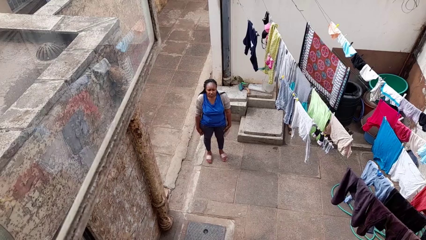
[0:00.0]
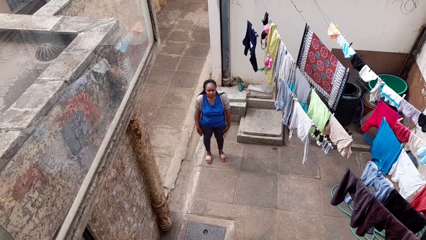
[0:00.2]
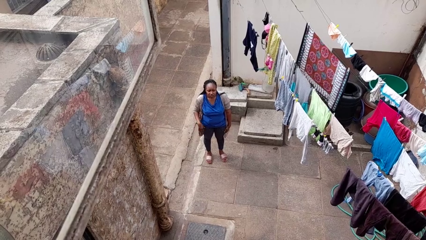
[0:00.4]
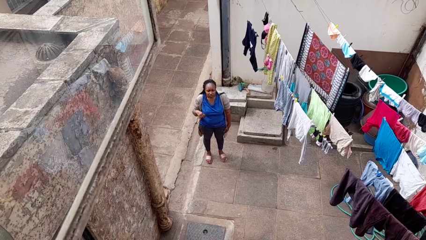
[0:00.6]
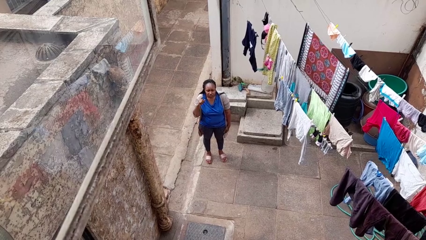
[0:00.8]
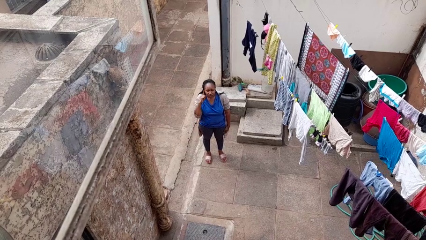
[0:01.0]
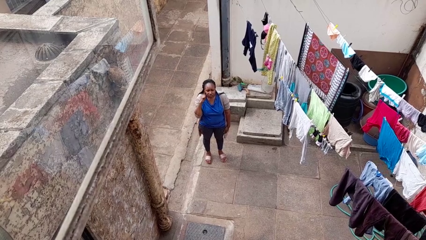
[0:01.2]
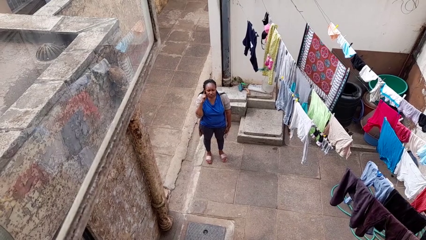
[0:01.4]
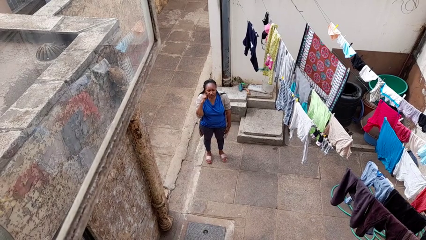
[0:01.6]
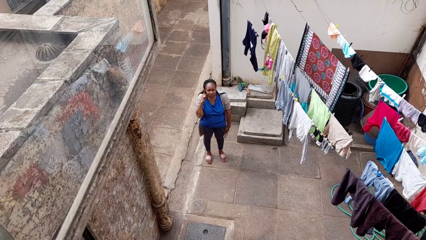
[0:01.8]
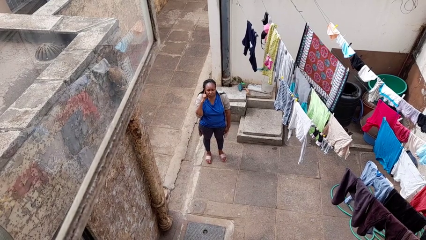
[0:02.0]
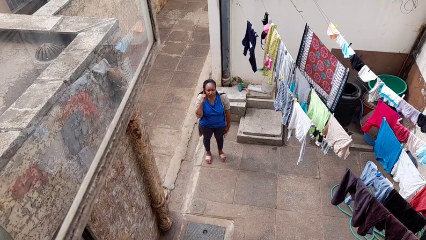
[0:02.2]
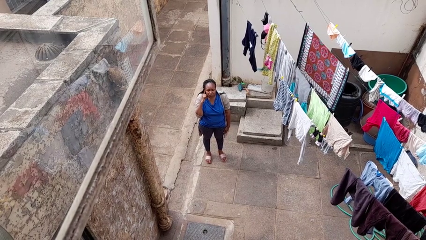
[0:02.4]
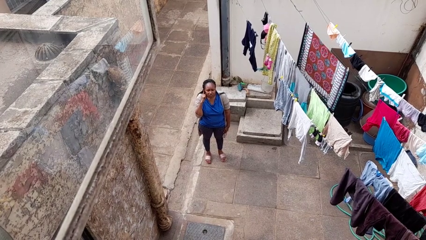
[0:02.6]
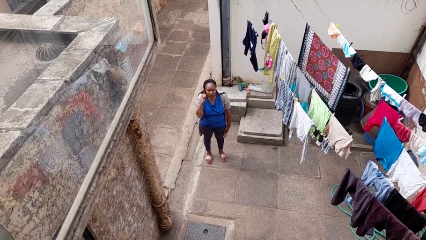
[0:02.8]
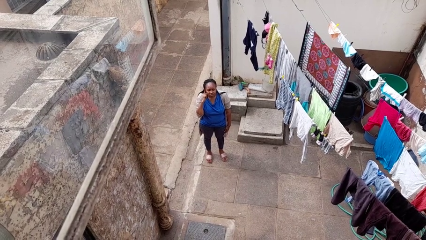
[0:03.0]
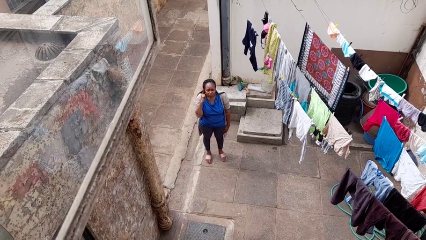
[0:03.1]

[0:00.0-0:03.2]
person gestures listen closely

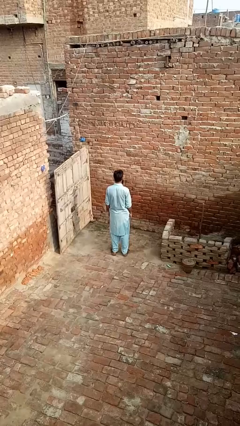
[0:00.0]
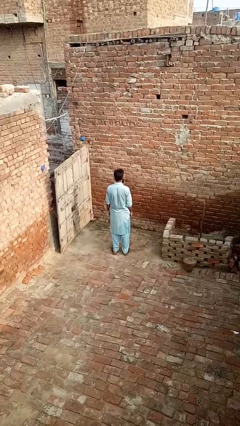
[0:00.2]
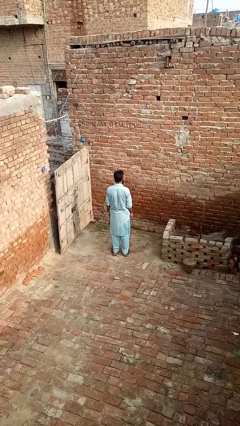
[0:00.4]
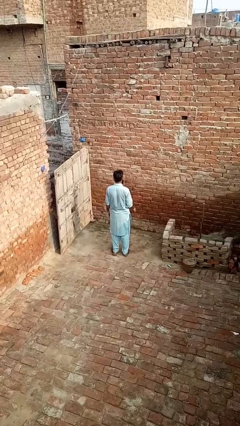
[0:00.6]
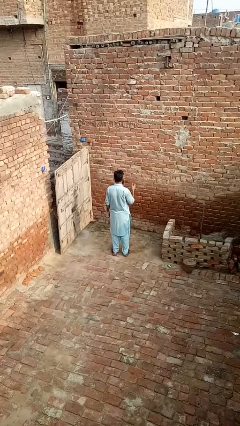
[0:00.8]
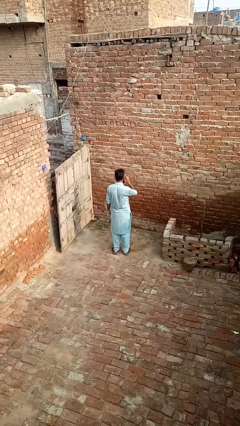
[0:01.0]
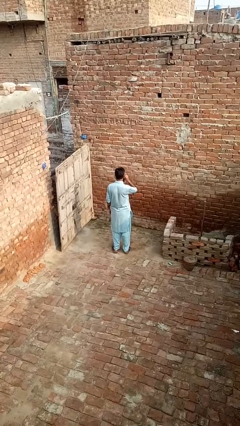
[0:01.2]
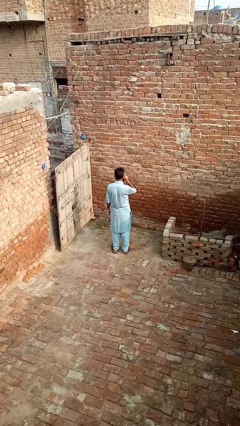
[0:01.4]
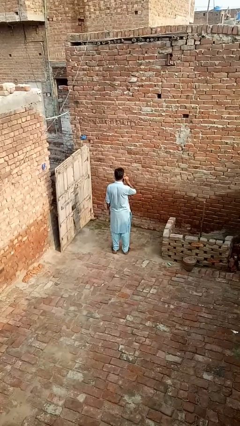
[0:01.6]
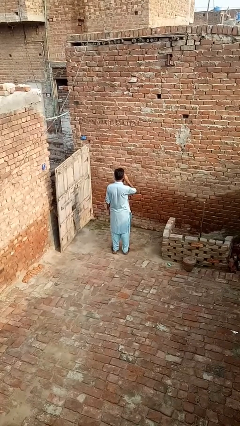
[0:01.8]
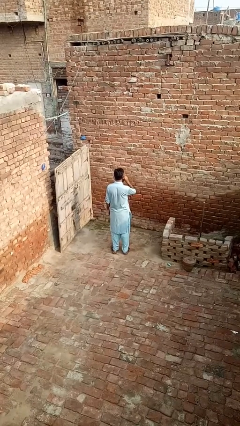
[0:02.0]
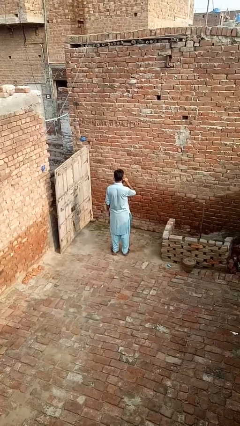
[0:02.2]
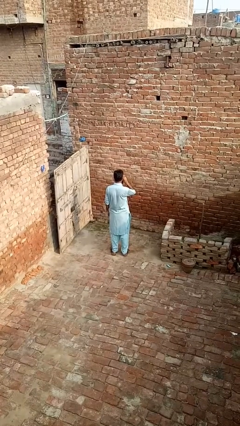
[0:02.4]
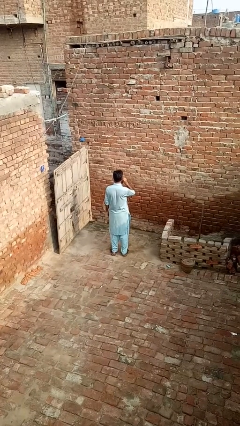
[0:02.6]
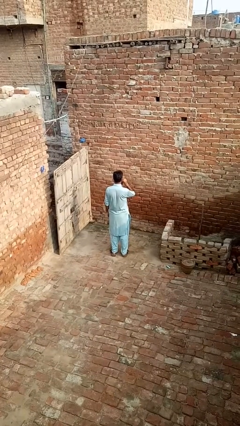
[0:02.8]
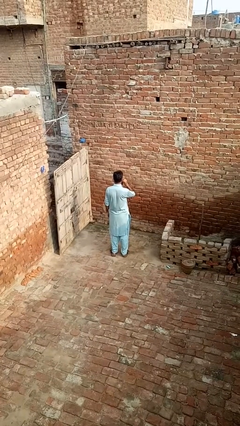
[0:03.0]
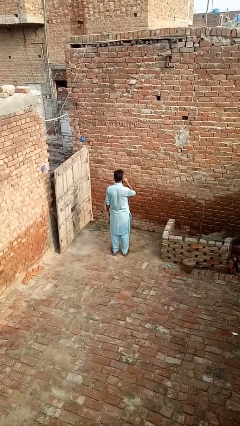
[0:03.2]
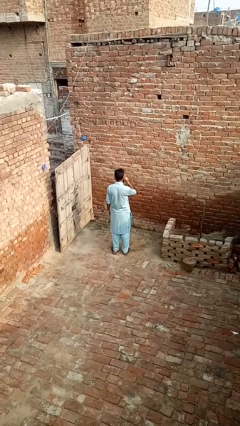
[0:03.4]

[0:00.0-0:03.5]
person touches earlobe

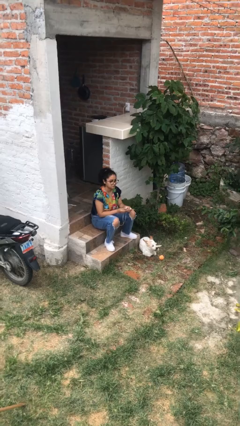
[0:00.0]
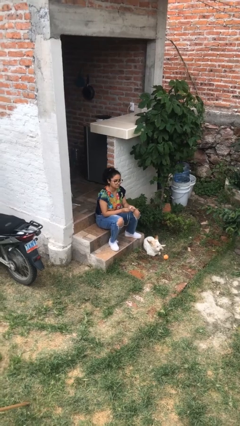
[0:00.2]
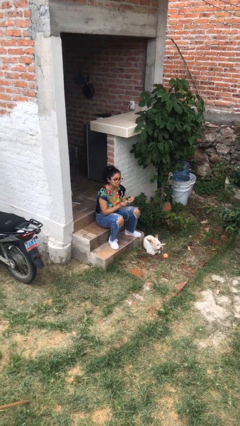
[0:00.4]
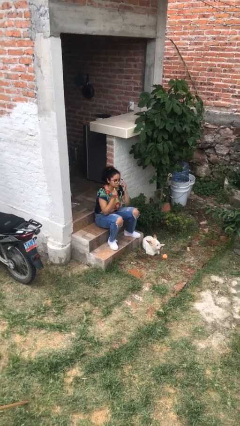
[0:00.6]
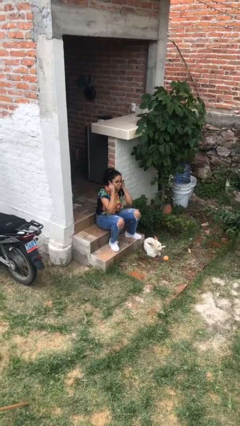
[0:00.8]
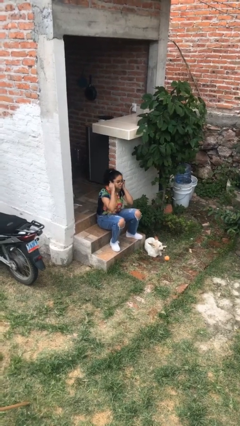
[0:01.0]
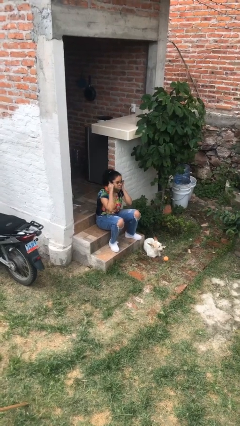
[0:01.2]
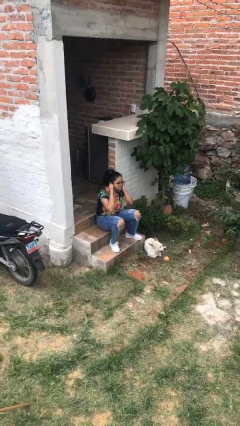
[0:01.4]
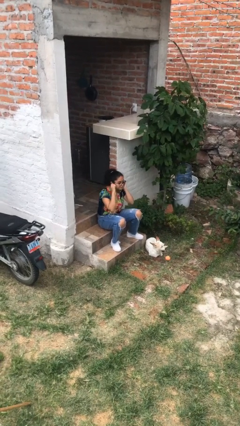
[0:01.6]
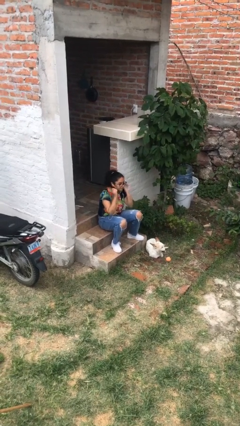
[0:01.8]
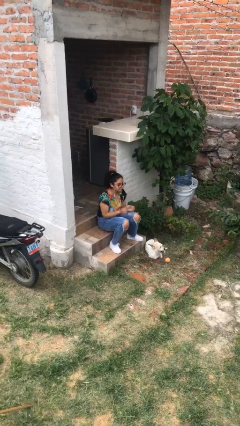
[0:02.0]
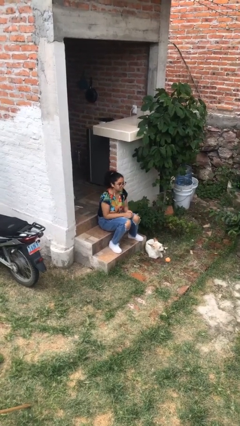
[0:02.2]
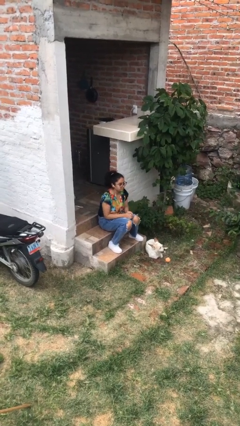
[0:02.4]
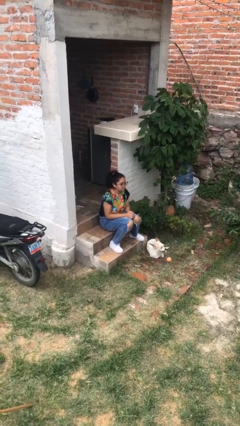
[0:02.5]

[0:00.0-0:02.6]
person puts on headphones

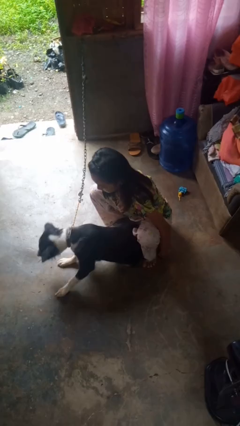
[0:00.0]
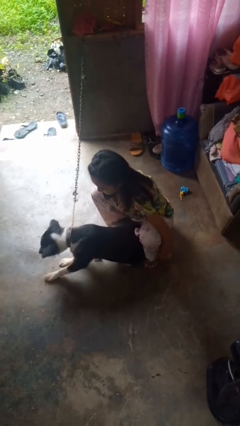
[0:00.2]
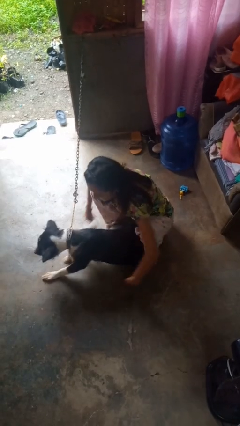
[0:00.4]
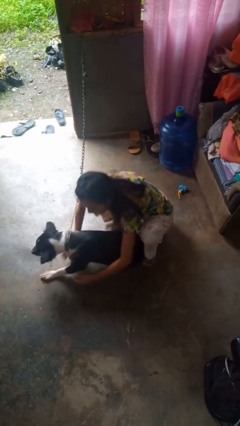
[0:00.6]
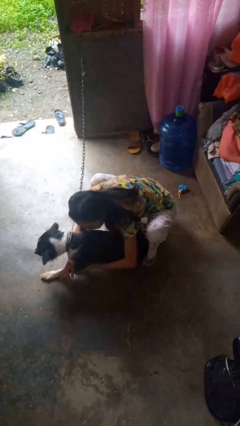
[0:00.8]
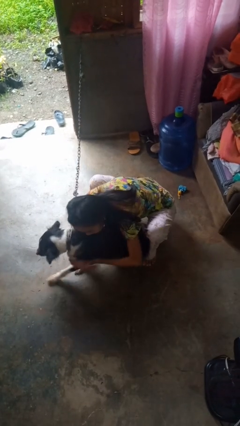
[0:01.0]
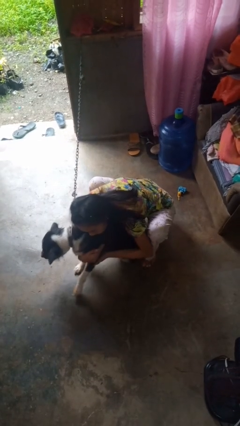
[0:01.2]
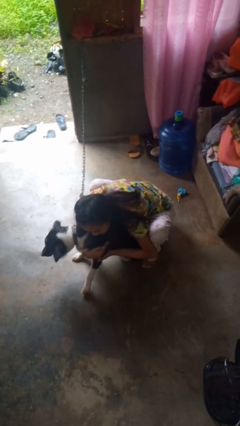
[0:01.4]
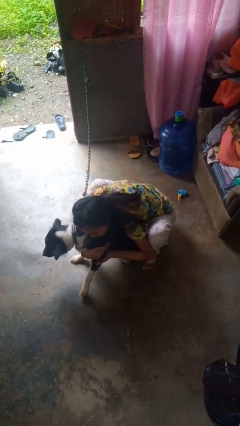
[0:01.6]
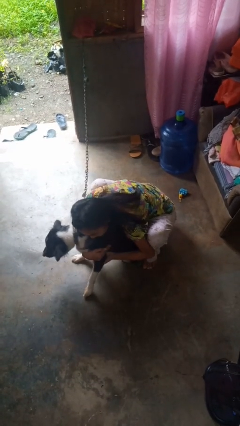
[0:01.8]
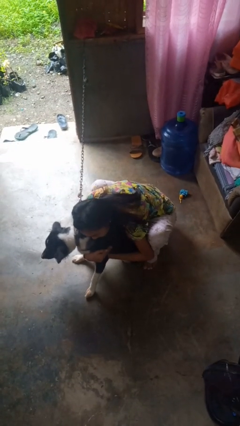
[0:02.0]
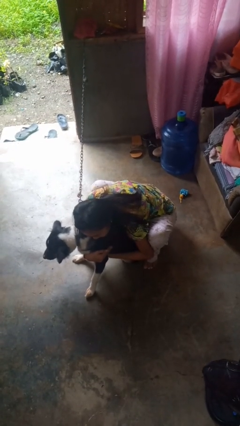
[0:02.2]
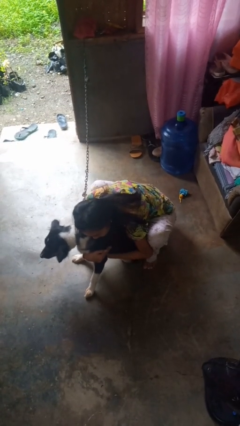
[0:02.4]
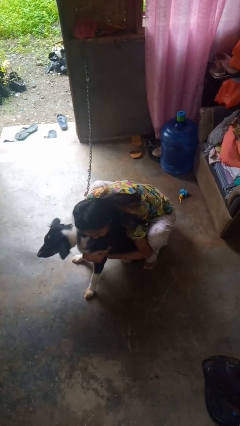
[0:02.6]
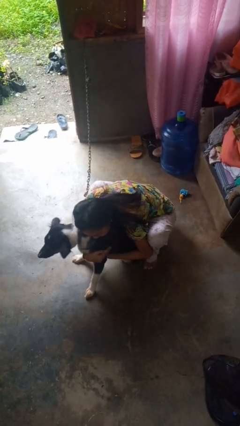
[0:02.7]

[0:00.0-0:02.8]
person hugs dog

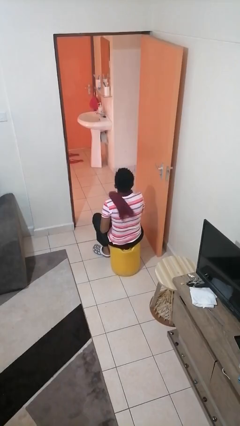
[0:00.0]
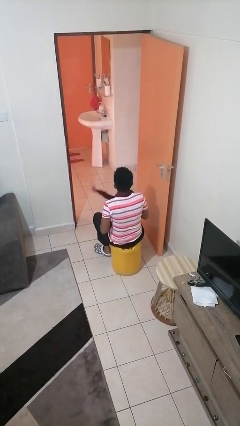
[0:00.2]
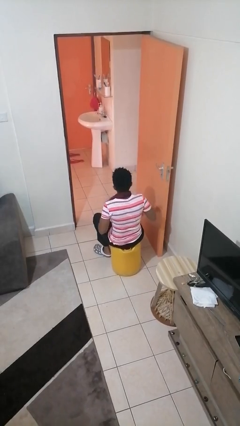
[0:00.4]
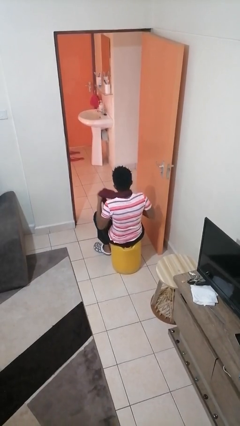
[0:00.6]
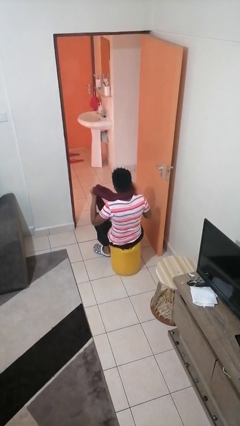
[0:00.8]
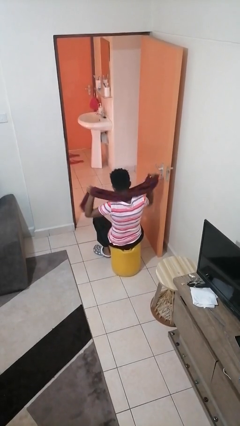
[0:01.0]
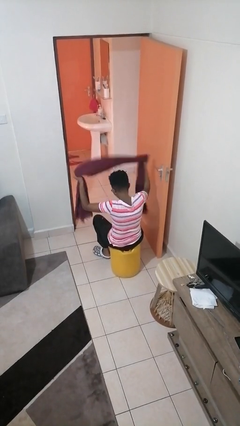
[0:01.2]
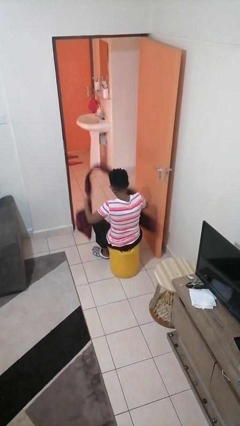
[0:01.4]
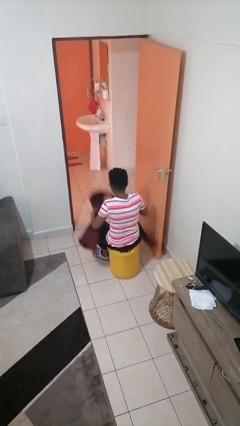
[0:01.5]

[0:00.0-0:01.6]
person takes off scarf

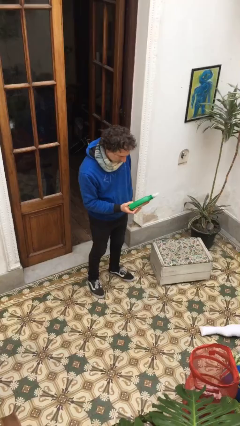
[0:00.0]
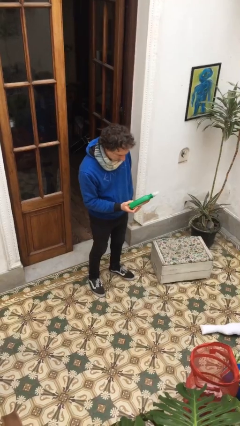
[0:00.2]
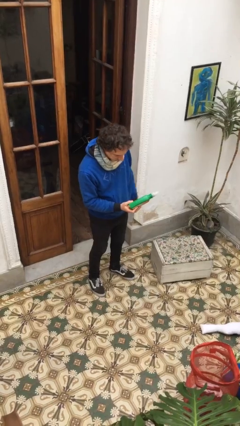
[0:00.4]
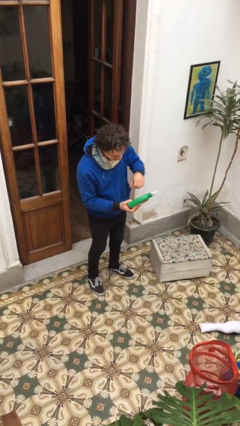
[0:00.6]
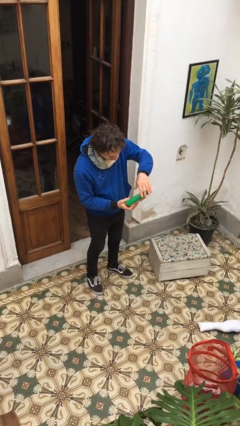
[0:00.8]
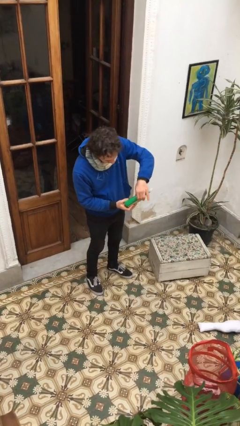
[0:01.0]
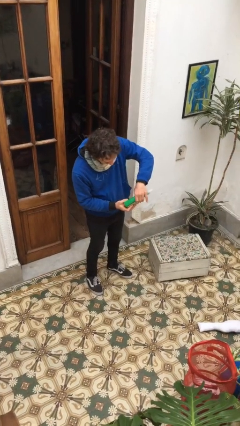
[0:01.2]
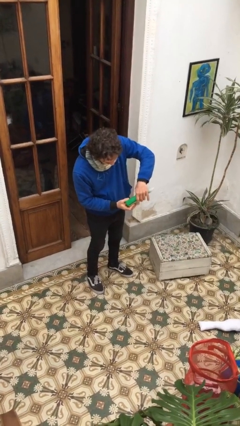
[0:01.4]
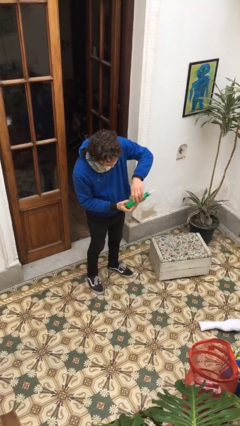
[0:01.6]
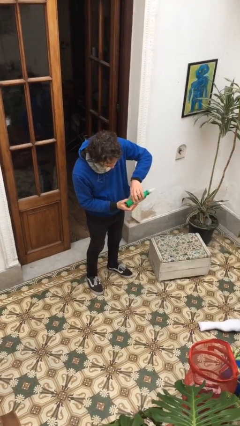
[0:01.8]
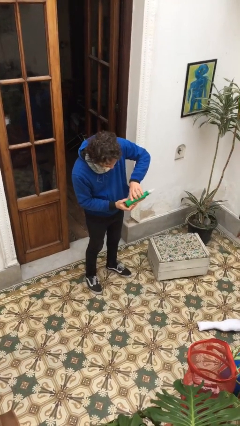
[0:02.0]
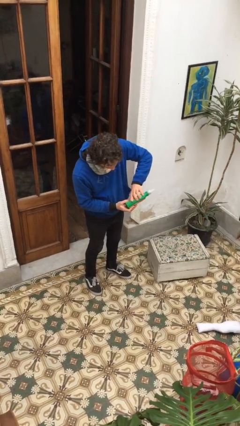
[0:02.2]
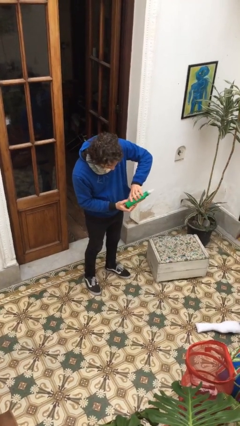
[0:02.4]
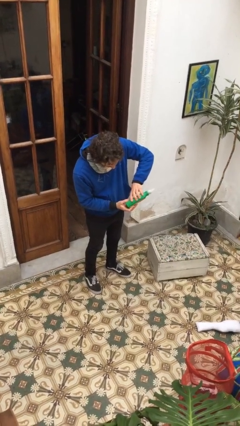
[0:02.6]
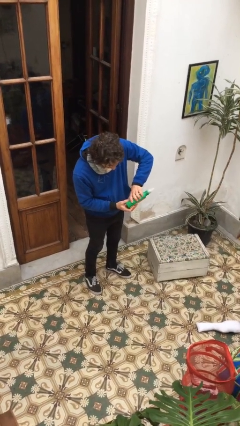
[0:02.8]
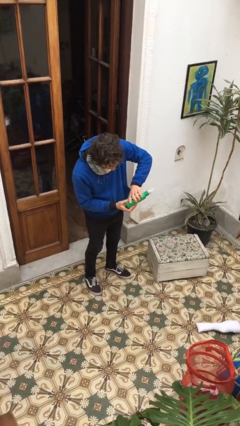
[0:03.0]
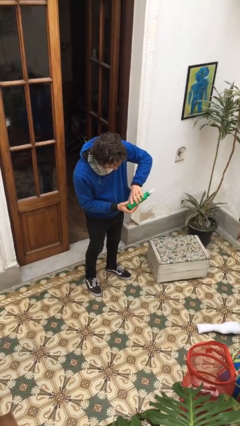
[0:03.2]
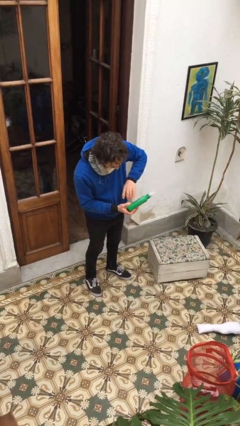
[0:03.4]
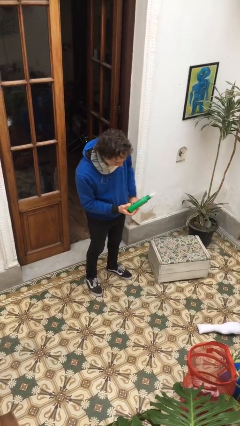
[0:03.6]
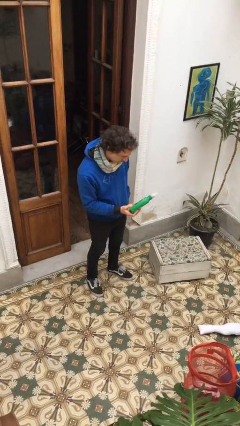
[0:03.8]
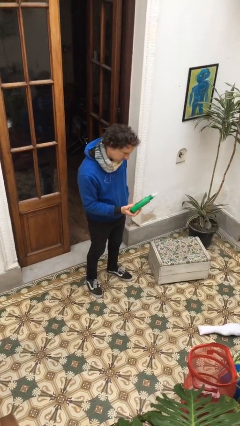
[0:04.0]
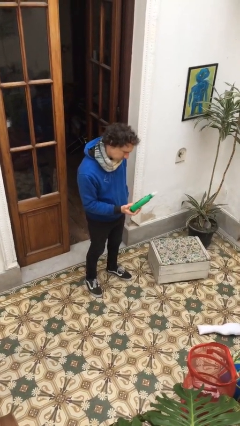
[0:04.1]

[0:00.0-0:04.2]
person taps object with finger
